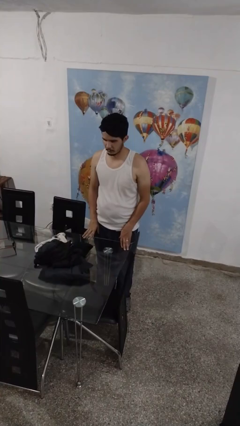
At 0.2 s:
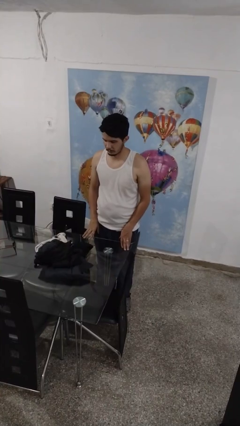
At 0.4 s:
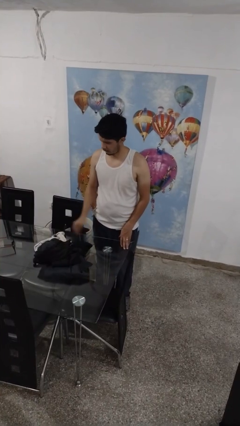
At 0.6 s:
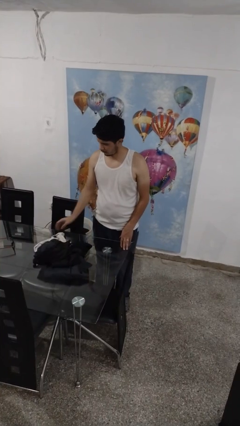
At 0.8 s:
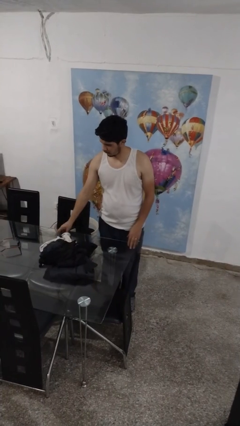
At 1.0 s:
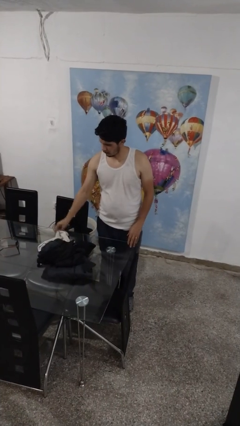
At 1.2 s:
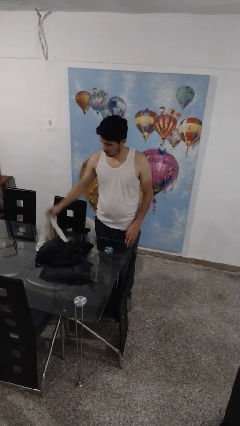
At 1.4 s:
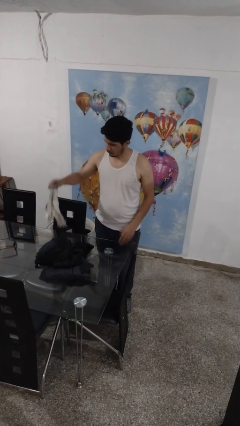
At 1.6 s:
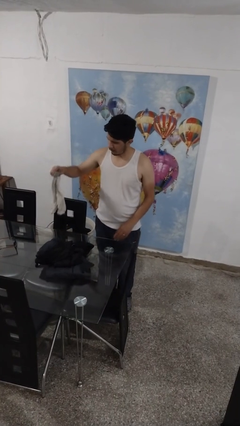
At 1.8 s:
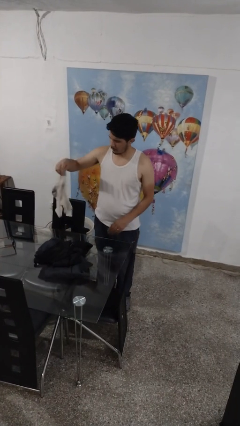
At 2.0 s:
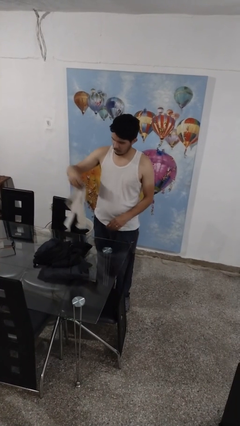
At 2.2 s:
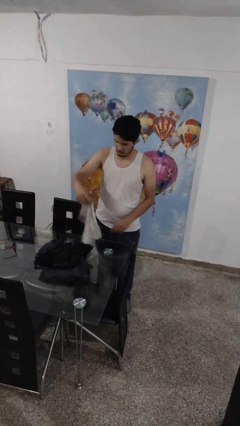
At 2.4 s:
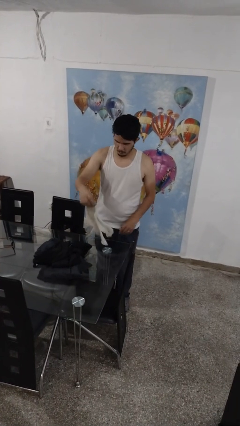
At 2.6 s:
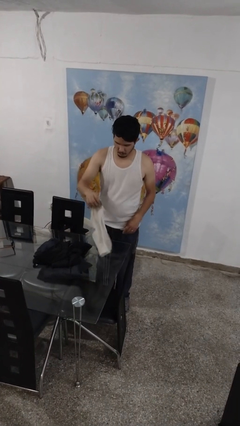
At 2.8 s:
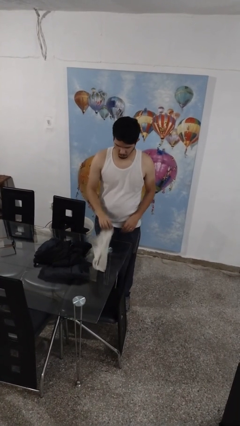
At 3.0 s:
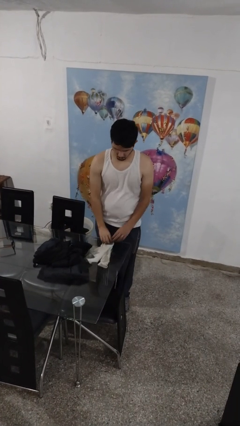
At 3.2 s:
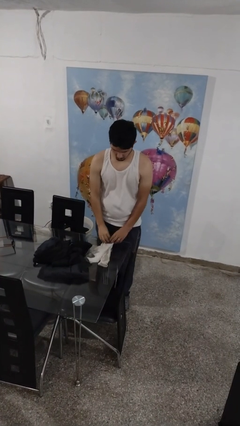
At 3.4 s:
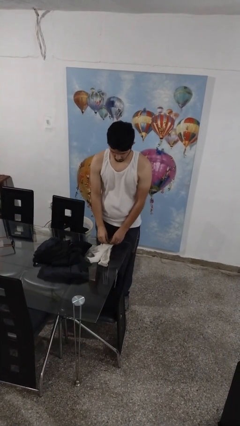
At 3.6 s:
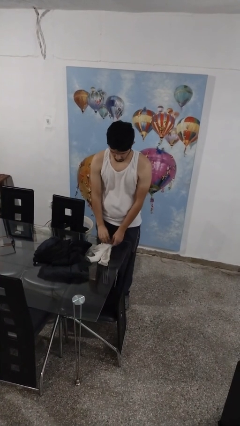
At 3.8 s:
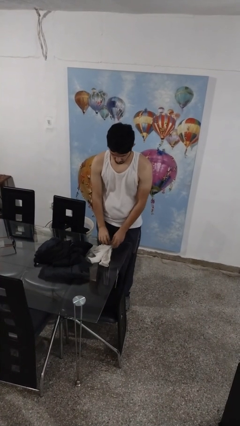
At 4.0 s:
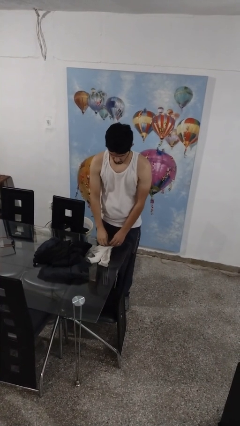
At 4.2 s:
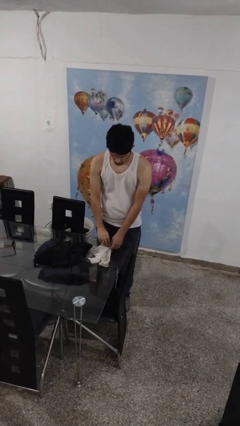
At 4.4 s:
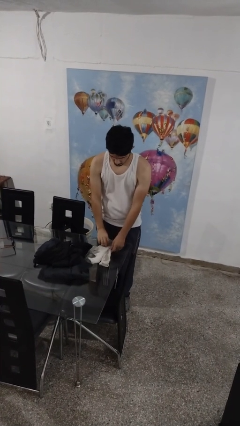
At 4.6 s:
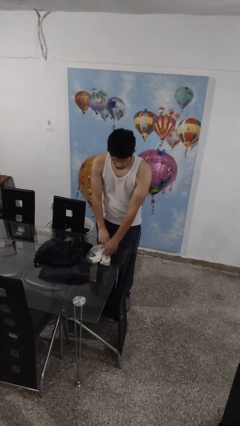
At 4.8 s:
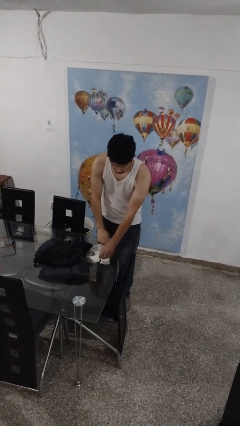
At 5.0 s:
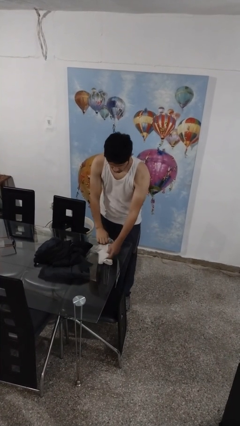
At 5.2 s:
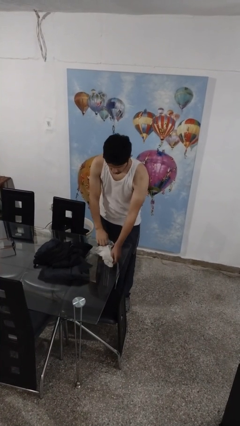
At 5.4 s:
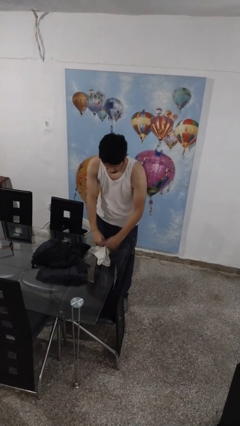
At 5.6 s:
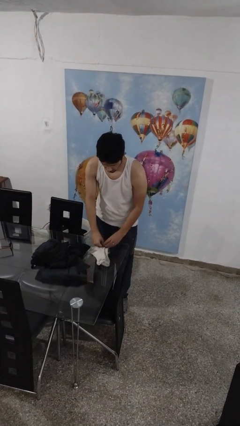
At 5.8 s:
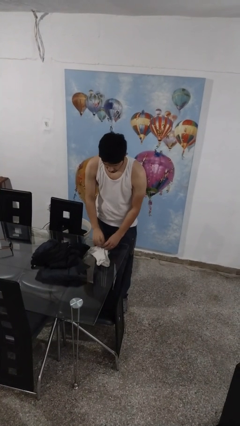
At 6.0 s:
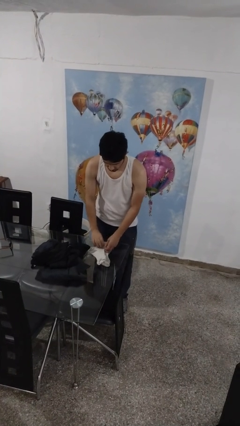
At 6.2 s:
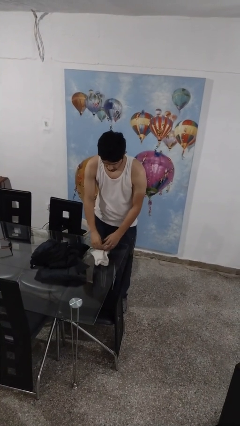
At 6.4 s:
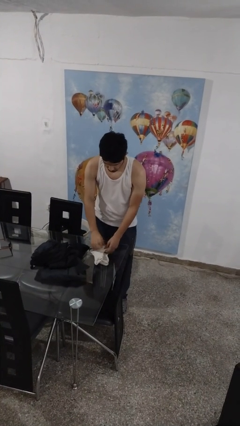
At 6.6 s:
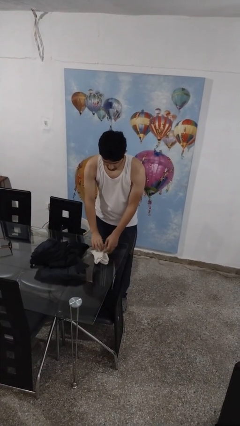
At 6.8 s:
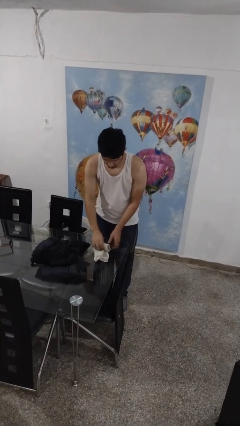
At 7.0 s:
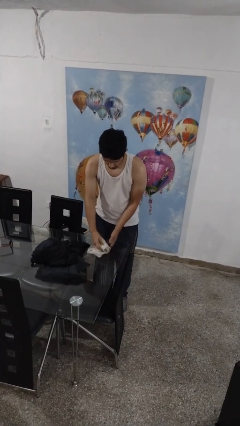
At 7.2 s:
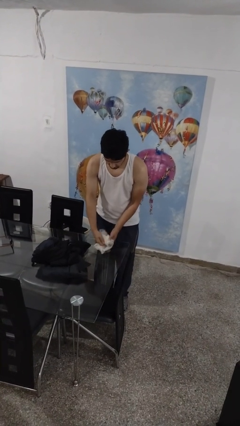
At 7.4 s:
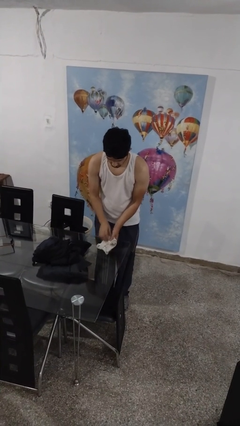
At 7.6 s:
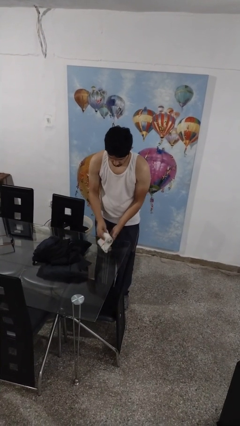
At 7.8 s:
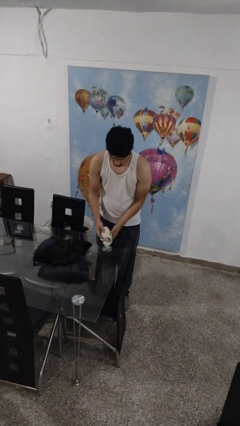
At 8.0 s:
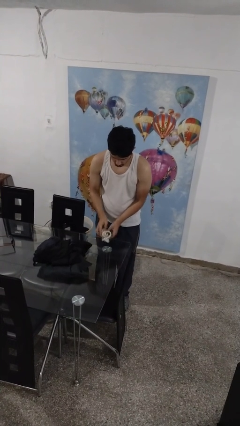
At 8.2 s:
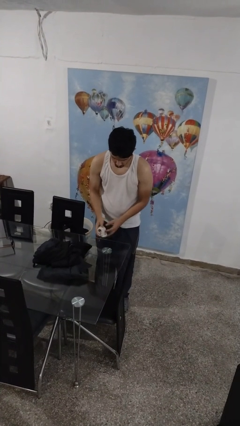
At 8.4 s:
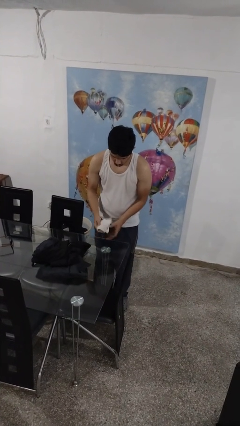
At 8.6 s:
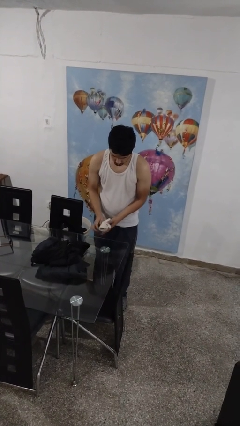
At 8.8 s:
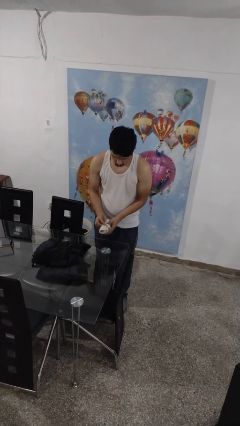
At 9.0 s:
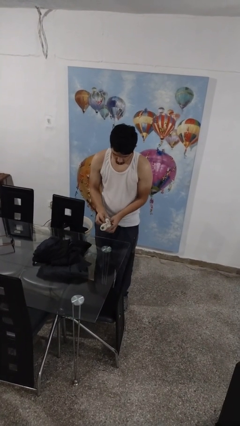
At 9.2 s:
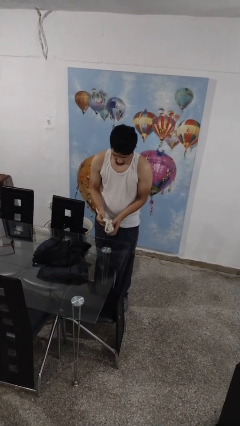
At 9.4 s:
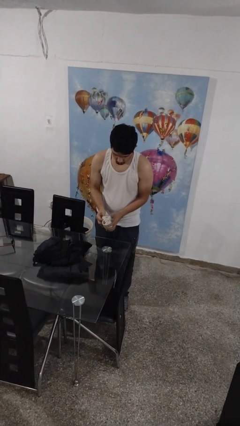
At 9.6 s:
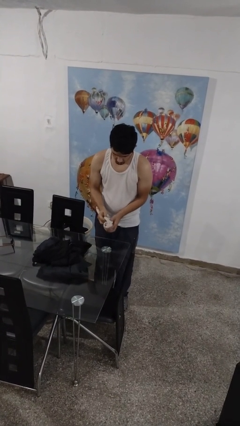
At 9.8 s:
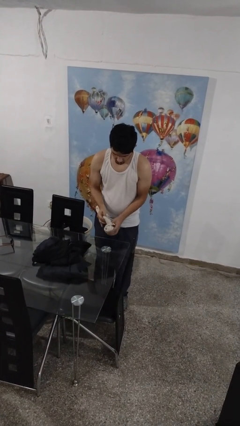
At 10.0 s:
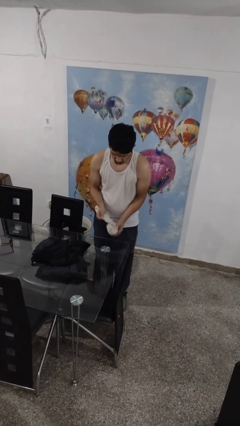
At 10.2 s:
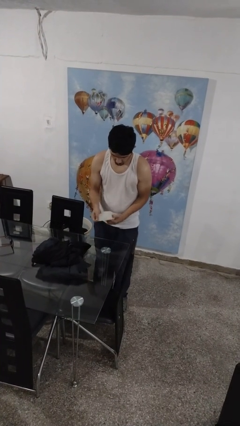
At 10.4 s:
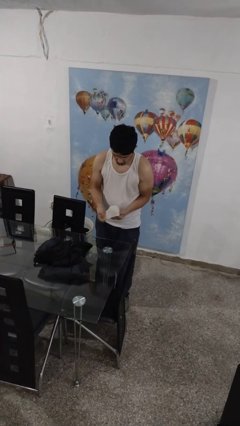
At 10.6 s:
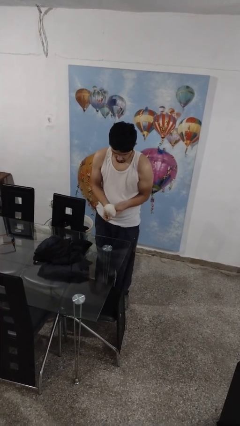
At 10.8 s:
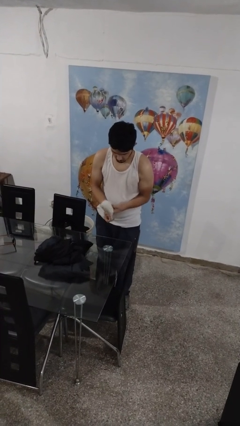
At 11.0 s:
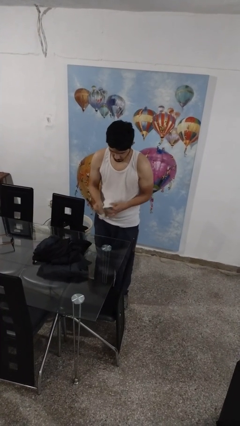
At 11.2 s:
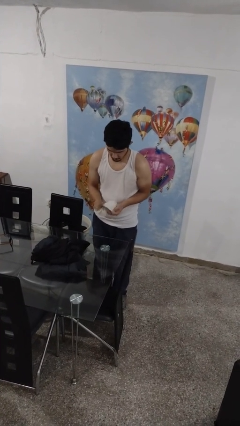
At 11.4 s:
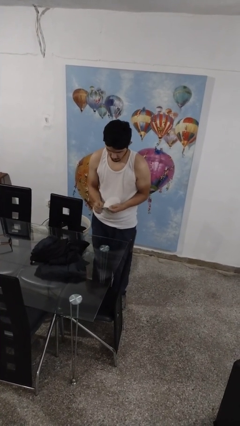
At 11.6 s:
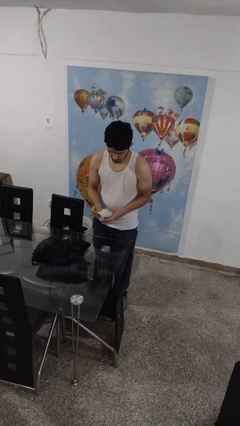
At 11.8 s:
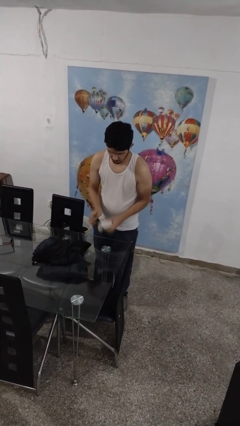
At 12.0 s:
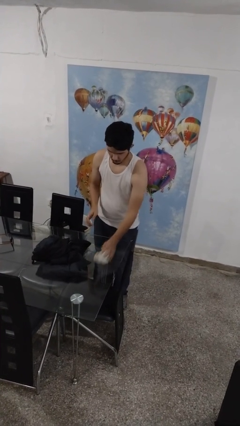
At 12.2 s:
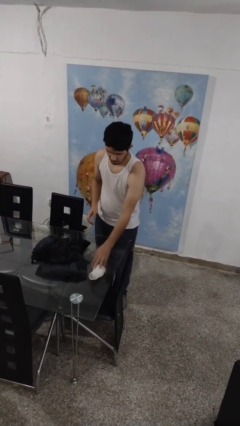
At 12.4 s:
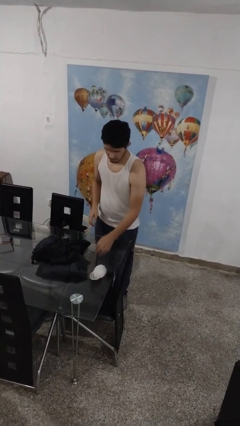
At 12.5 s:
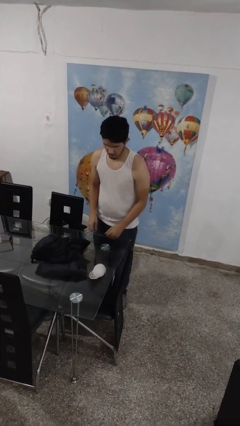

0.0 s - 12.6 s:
person folds socks

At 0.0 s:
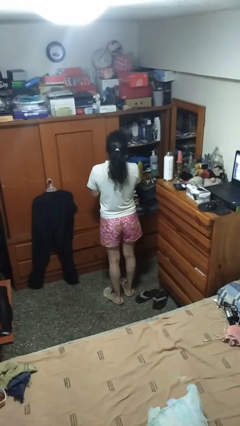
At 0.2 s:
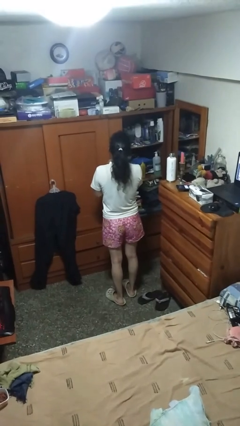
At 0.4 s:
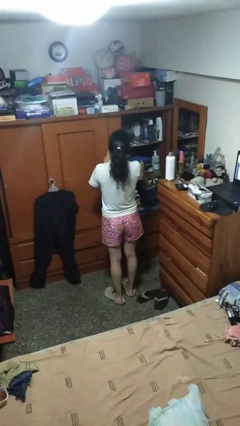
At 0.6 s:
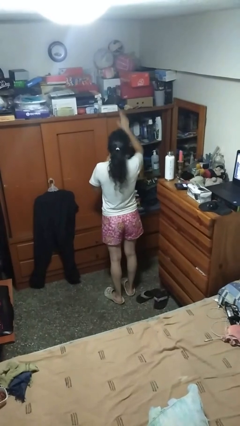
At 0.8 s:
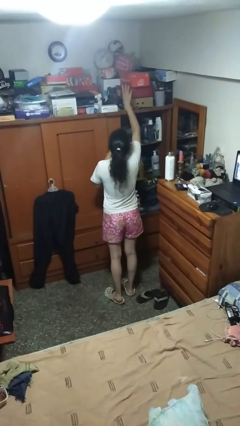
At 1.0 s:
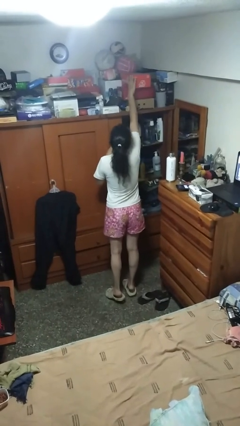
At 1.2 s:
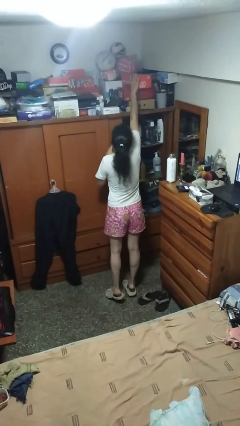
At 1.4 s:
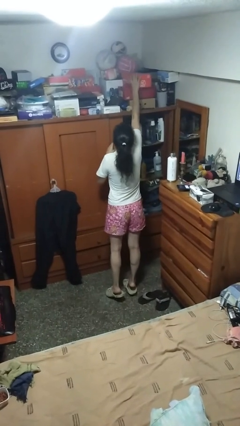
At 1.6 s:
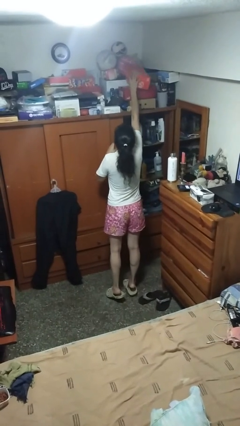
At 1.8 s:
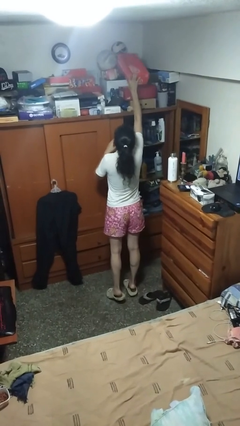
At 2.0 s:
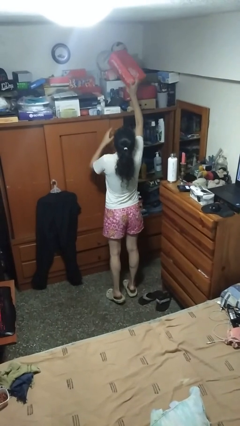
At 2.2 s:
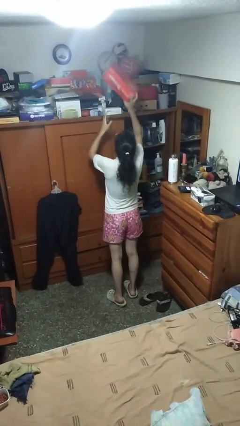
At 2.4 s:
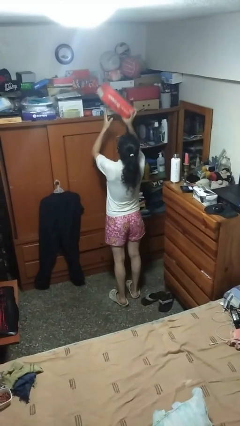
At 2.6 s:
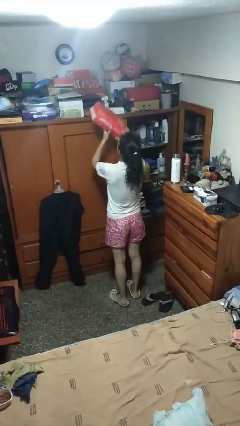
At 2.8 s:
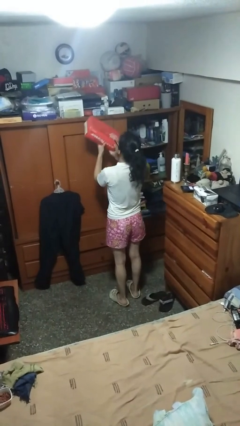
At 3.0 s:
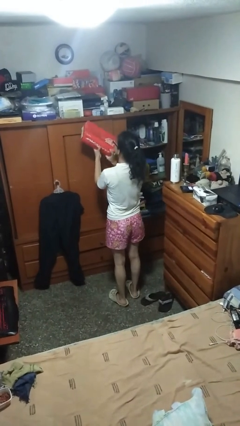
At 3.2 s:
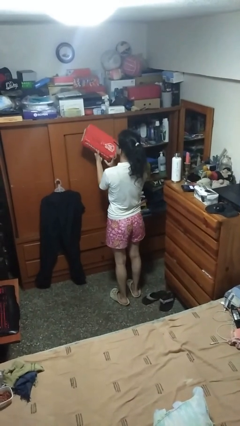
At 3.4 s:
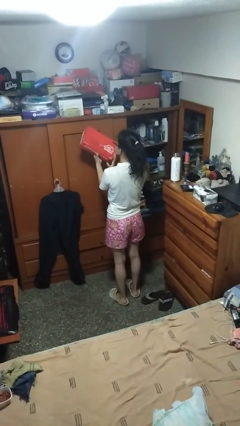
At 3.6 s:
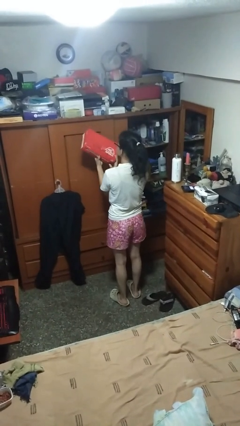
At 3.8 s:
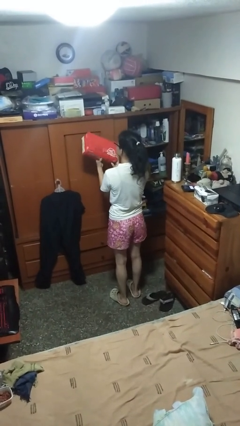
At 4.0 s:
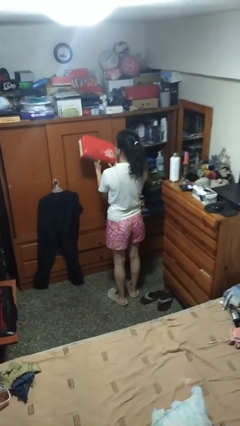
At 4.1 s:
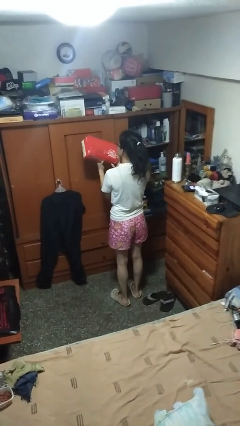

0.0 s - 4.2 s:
person picks up object from shelf

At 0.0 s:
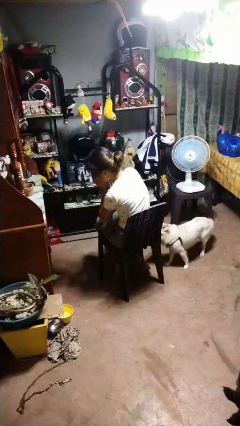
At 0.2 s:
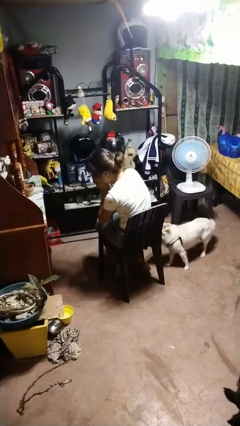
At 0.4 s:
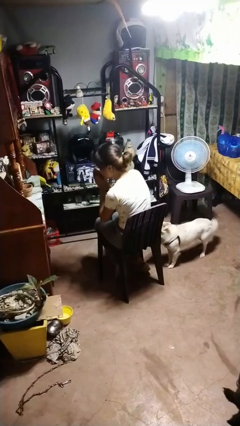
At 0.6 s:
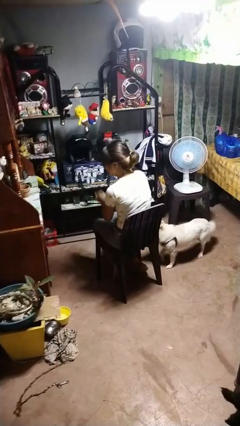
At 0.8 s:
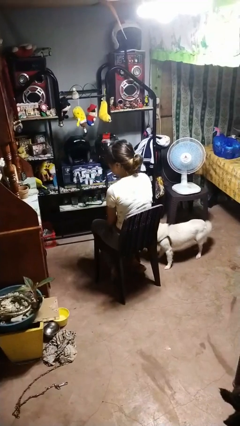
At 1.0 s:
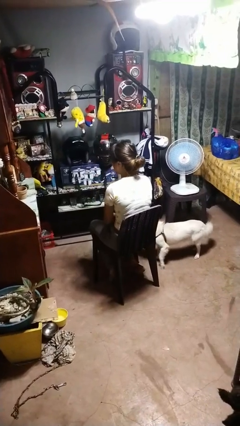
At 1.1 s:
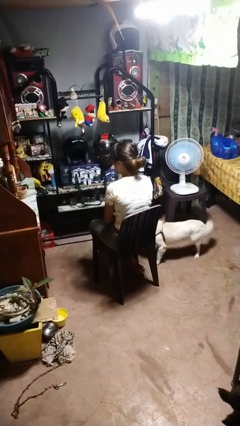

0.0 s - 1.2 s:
person sneezes into hand
